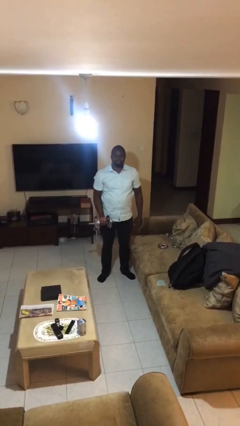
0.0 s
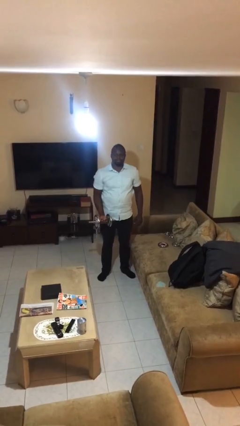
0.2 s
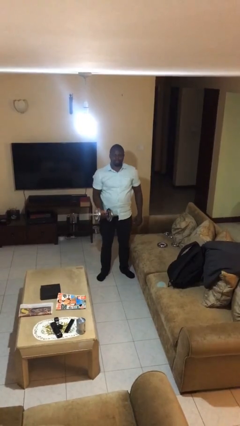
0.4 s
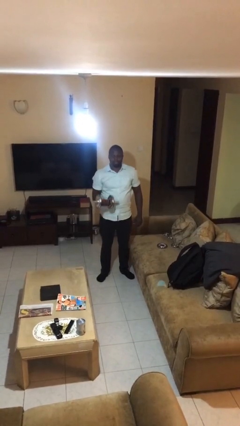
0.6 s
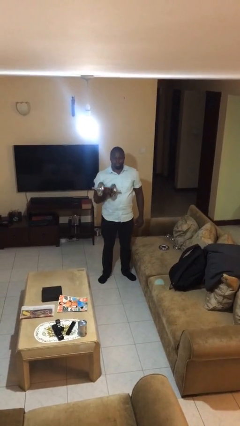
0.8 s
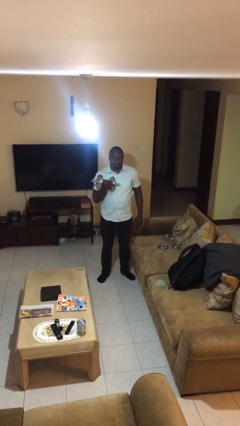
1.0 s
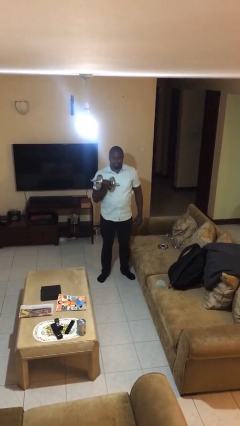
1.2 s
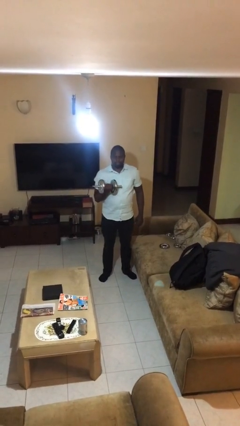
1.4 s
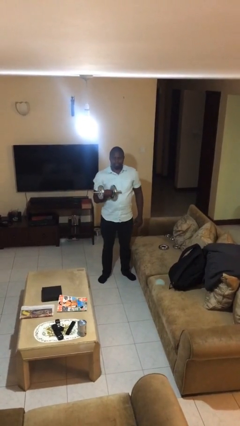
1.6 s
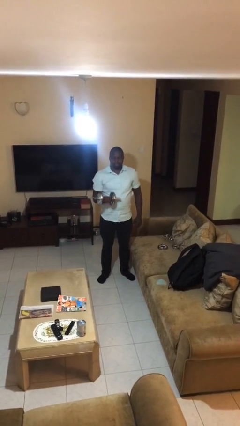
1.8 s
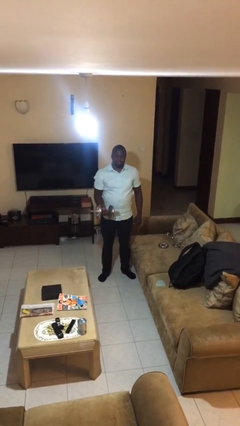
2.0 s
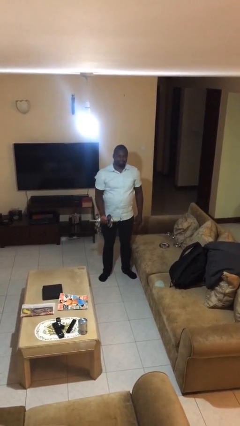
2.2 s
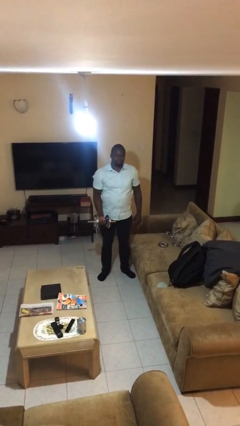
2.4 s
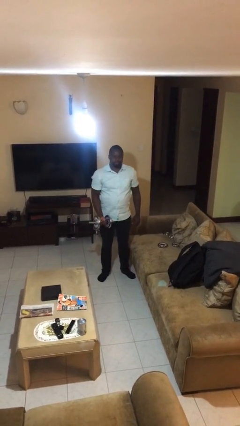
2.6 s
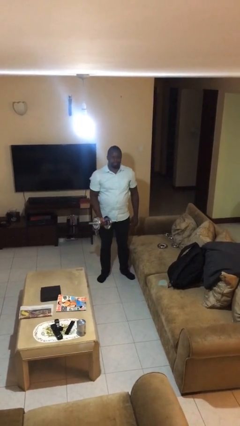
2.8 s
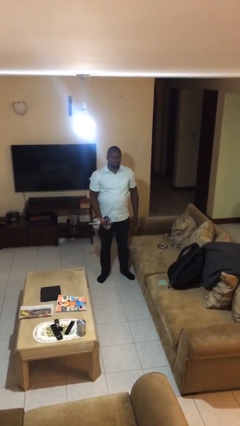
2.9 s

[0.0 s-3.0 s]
person lifts dumbbells

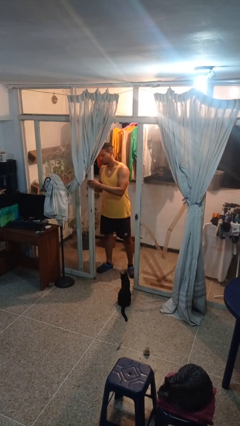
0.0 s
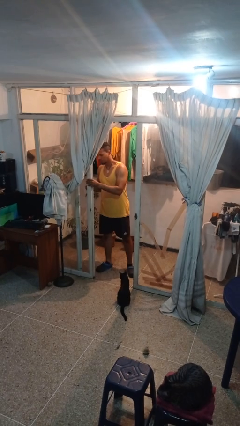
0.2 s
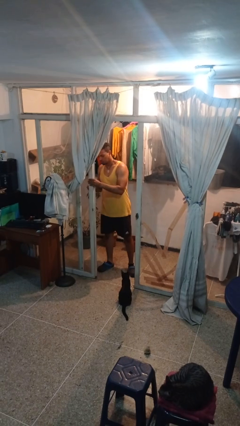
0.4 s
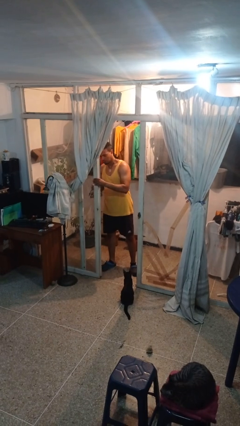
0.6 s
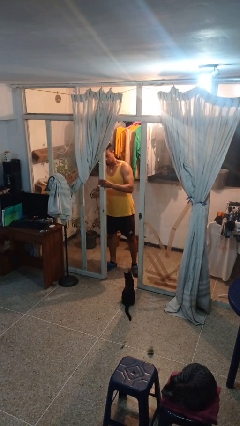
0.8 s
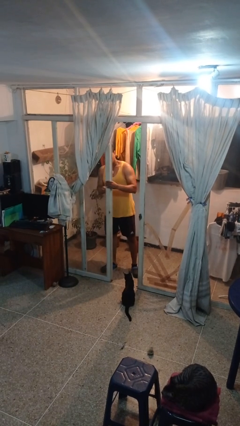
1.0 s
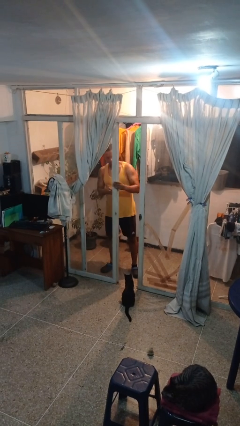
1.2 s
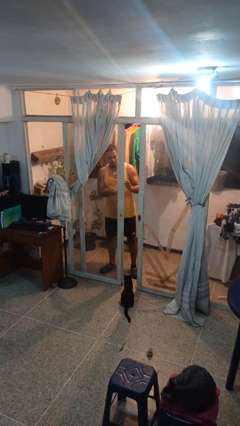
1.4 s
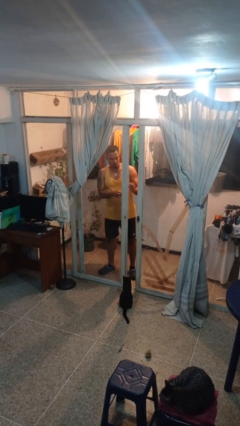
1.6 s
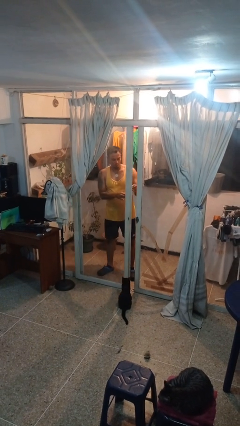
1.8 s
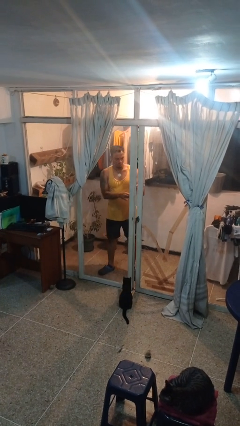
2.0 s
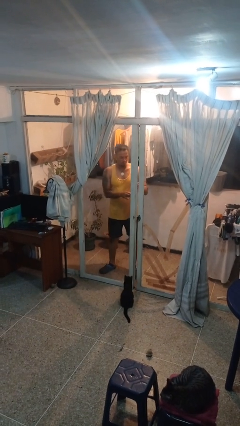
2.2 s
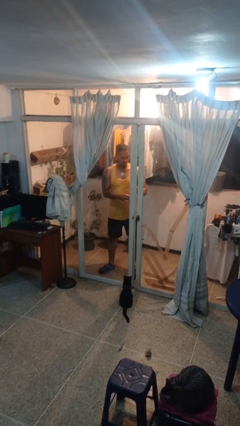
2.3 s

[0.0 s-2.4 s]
person closes sliding door

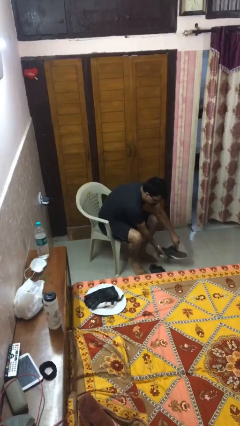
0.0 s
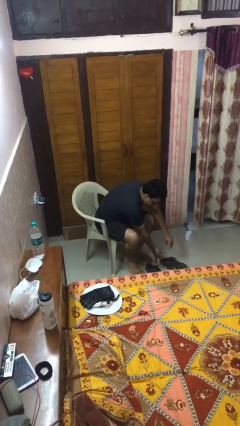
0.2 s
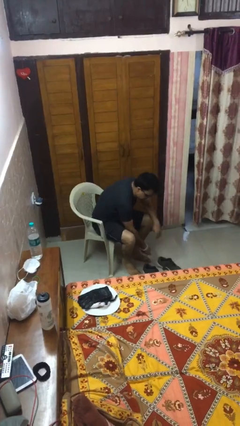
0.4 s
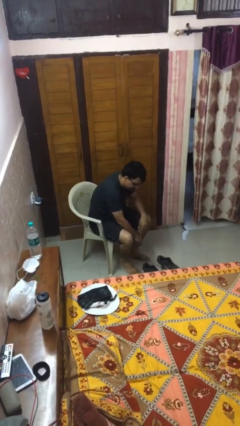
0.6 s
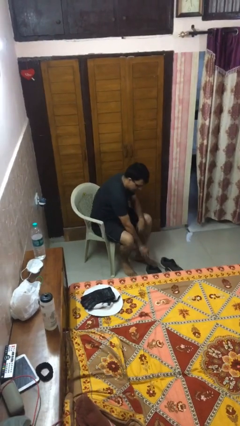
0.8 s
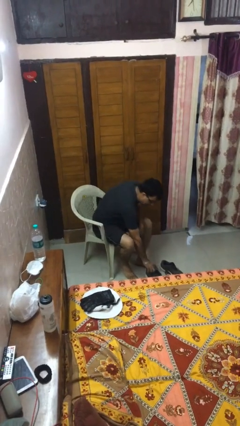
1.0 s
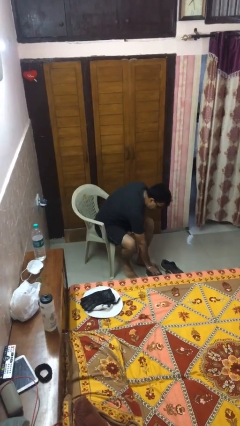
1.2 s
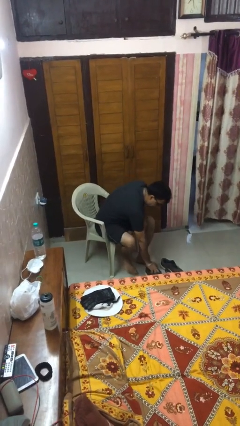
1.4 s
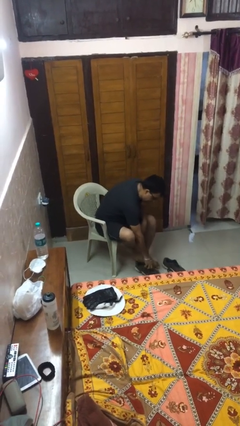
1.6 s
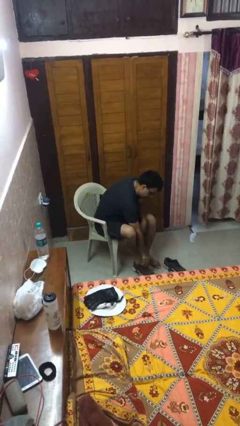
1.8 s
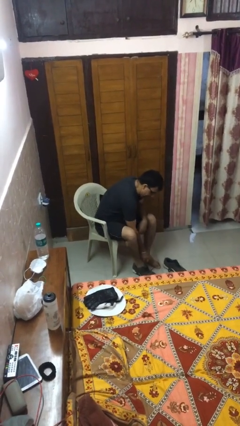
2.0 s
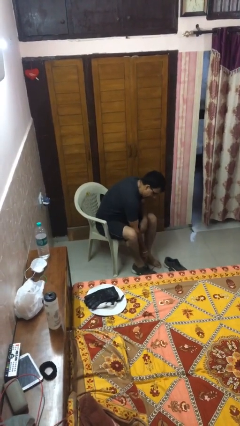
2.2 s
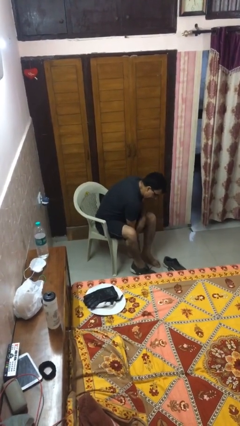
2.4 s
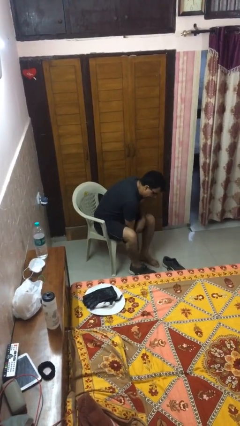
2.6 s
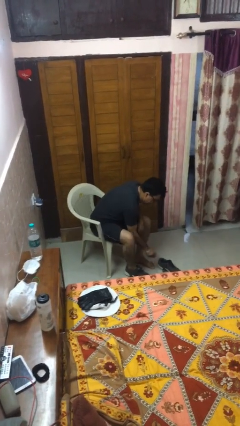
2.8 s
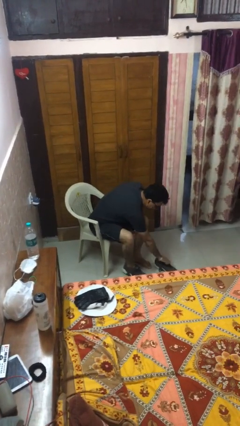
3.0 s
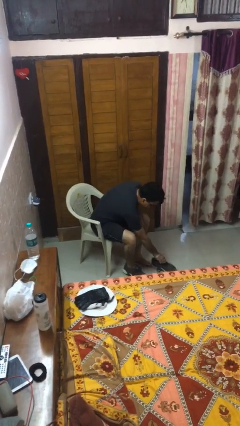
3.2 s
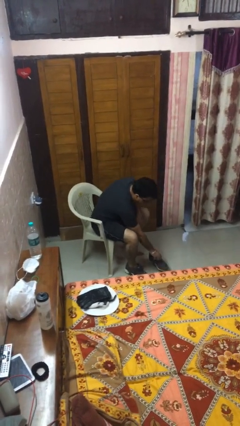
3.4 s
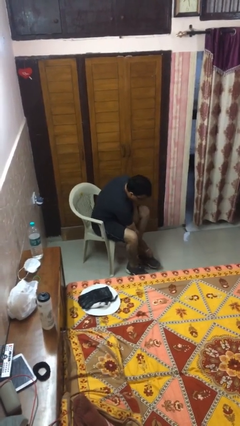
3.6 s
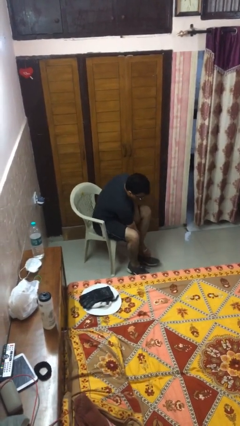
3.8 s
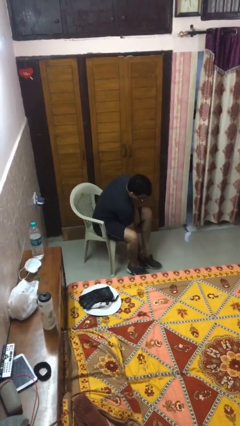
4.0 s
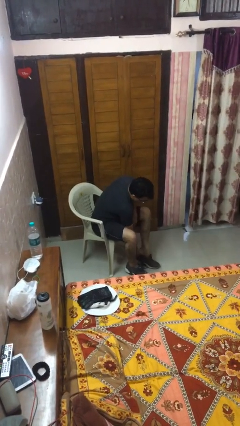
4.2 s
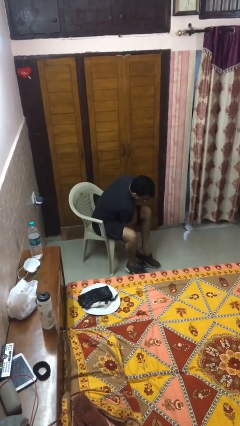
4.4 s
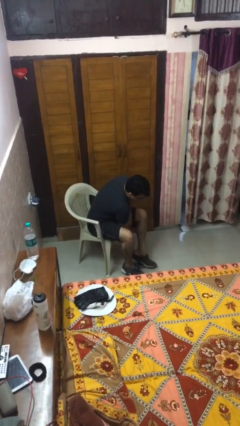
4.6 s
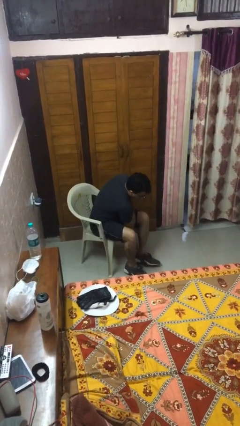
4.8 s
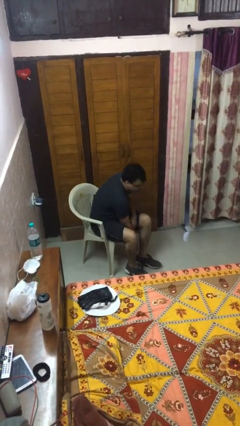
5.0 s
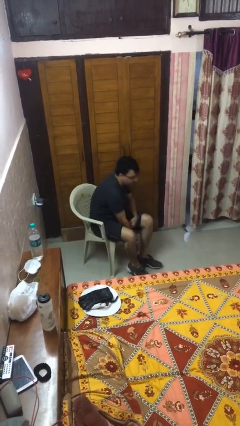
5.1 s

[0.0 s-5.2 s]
person puts on shoes

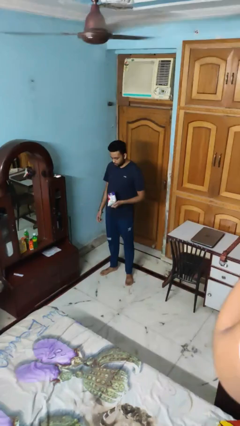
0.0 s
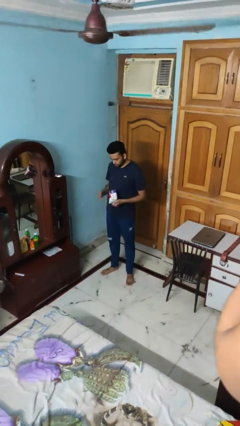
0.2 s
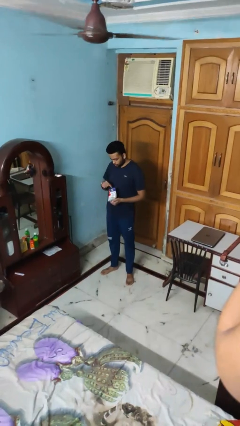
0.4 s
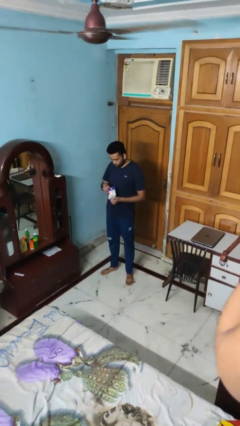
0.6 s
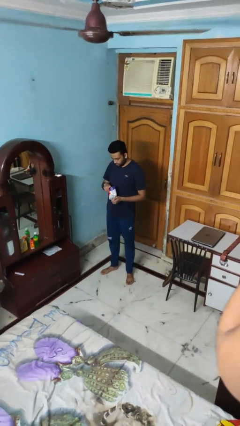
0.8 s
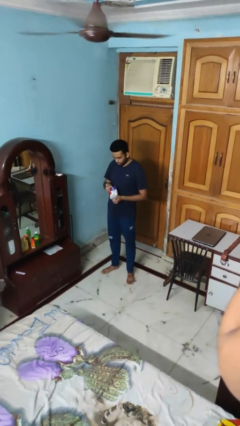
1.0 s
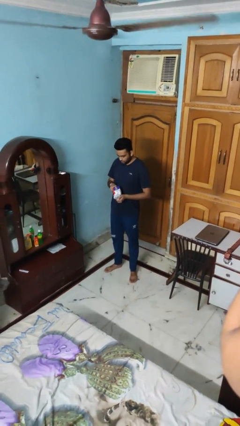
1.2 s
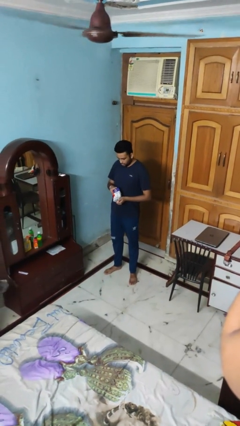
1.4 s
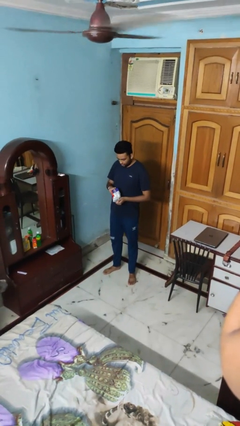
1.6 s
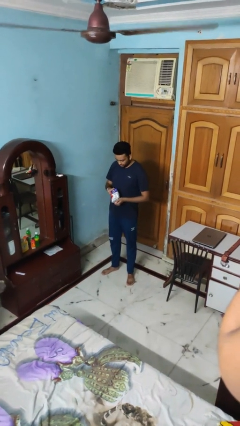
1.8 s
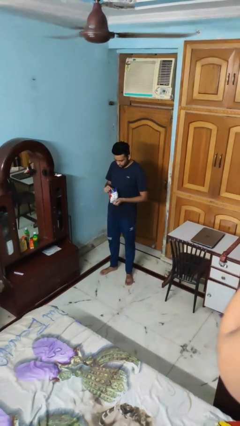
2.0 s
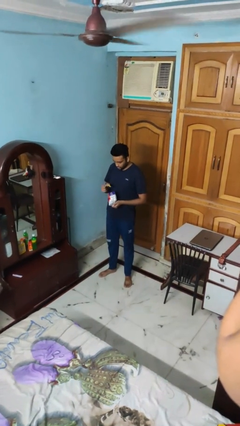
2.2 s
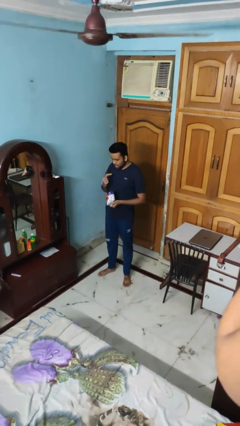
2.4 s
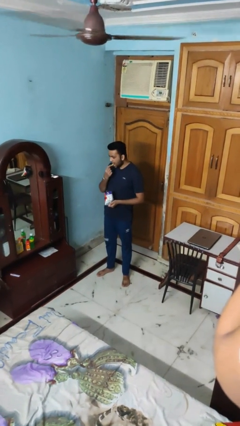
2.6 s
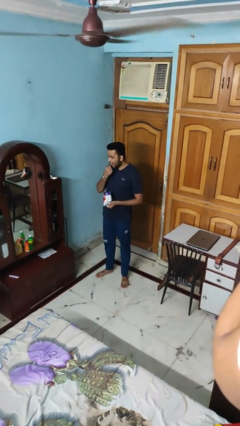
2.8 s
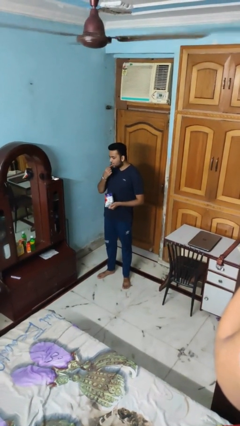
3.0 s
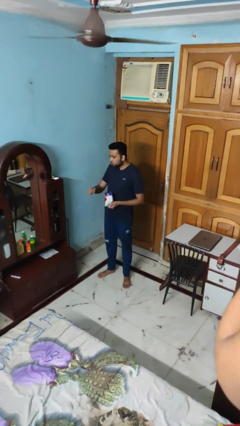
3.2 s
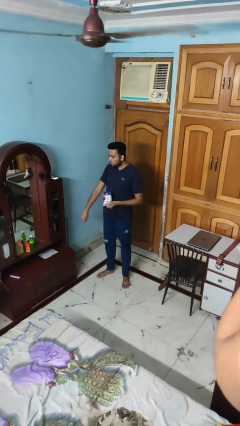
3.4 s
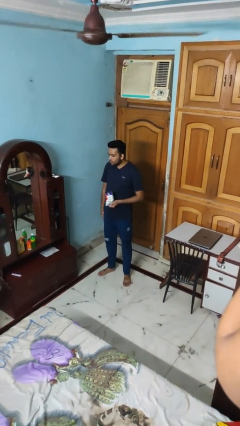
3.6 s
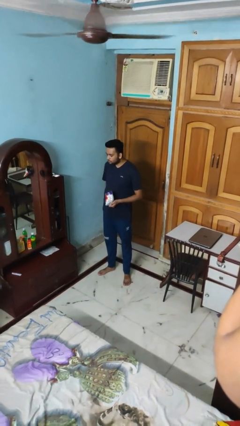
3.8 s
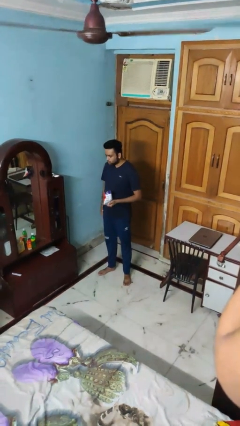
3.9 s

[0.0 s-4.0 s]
person eats snack from bag

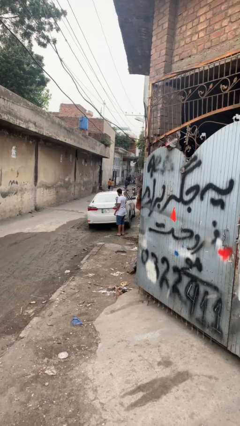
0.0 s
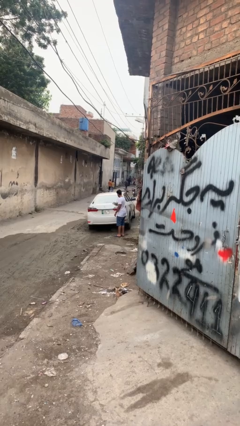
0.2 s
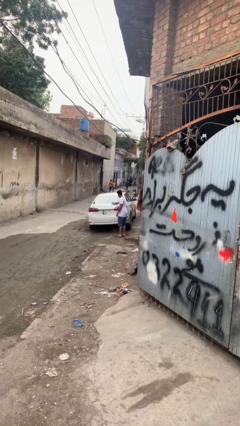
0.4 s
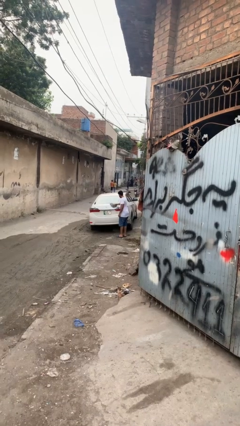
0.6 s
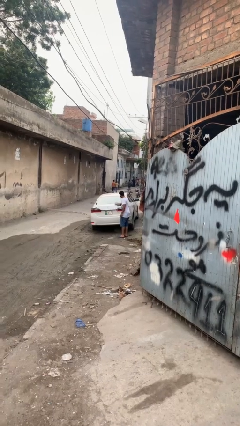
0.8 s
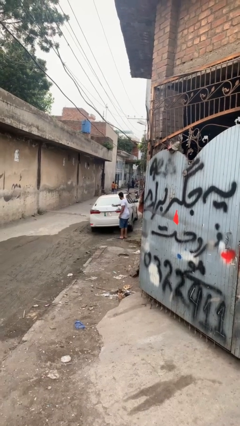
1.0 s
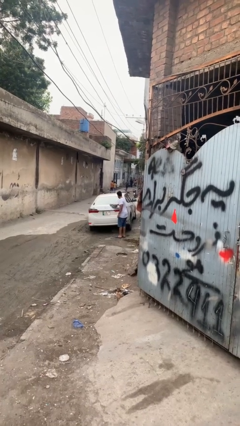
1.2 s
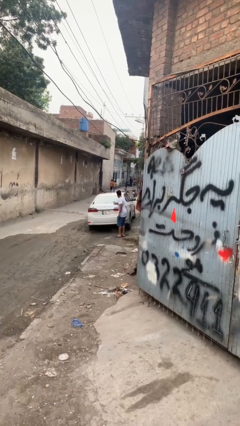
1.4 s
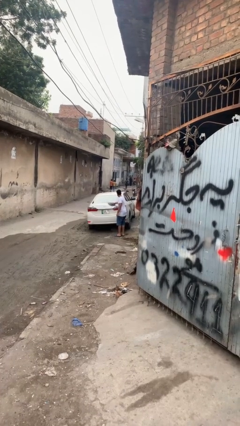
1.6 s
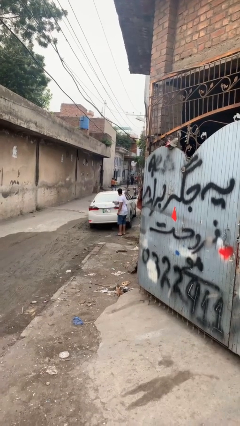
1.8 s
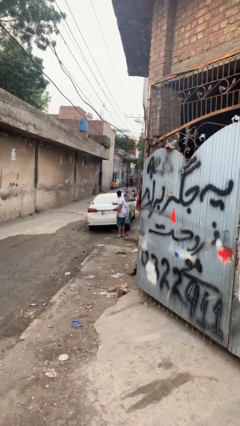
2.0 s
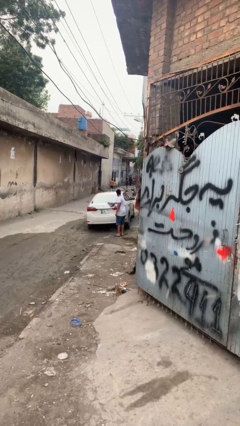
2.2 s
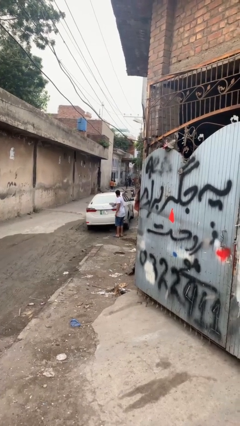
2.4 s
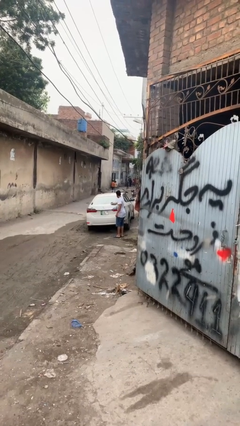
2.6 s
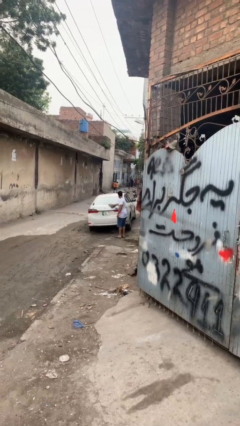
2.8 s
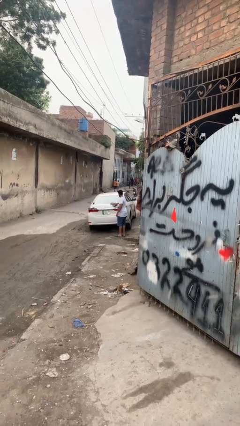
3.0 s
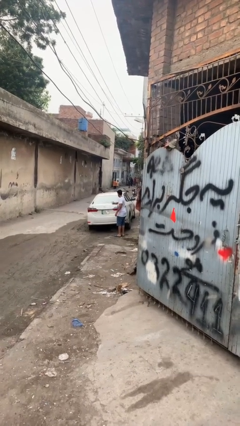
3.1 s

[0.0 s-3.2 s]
person polishes car with rag
